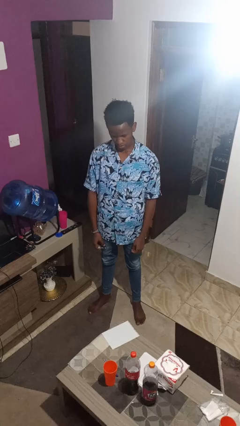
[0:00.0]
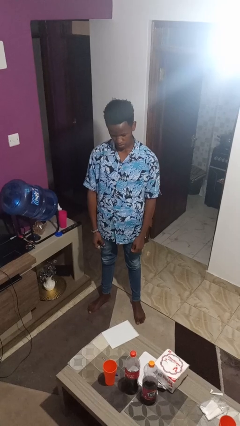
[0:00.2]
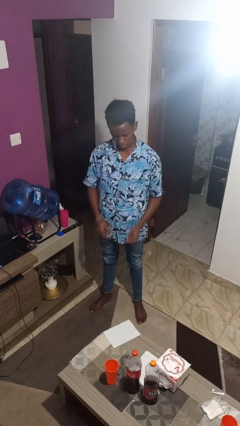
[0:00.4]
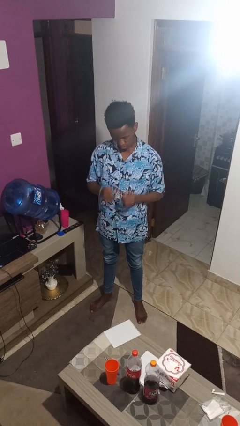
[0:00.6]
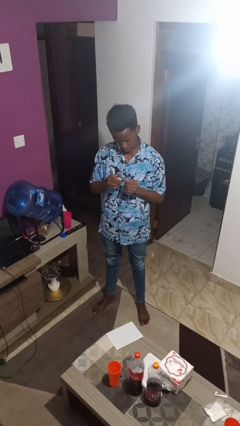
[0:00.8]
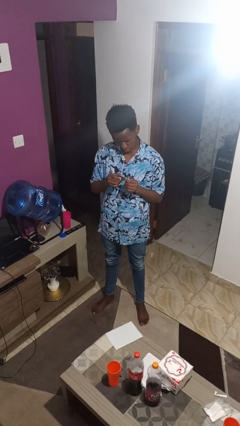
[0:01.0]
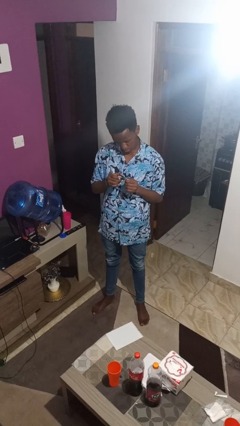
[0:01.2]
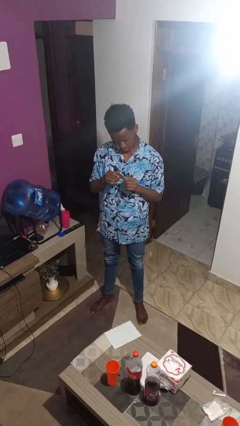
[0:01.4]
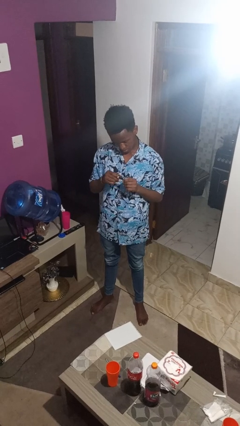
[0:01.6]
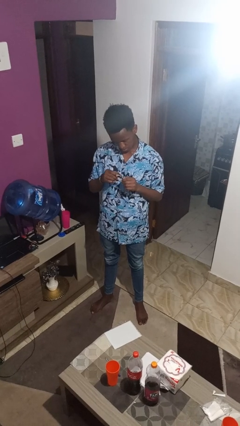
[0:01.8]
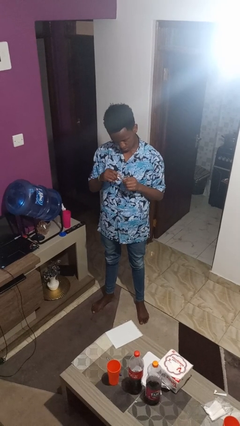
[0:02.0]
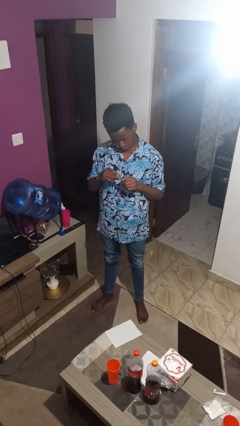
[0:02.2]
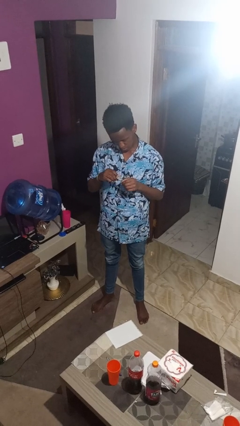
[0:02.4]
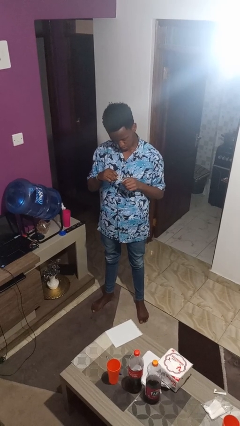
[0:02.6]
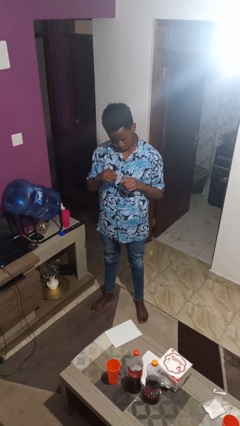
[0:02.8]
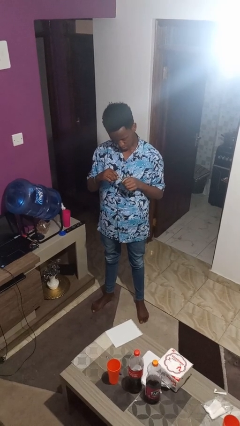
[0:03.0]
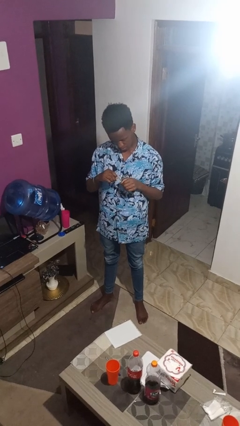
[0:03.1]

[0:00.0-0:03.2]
person clips fingernails

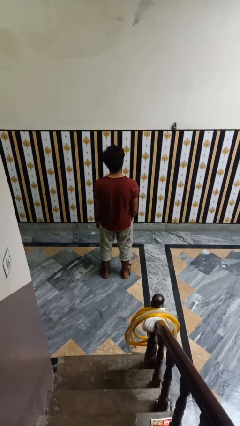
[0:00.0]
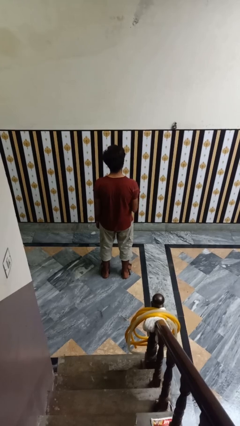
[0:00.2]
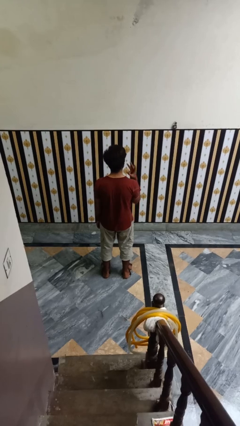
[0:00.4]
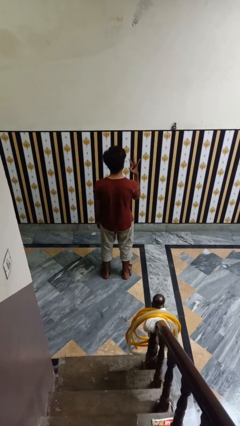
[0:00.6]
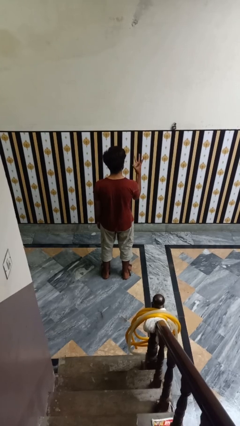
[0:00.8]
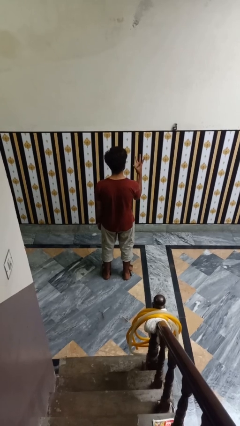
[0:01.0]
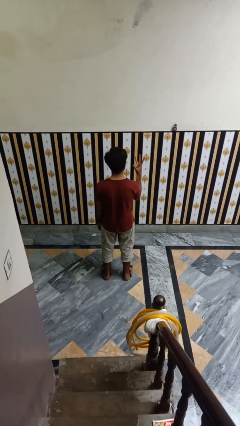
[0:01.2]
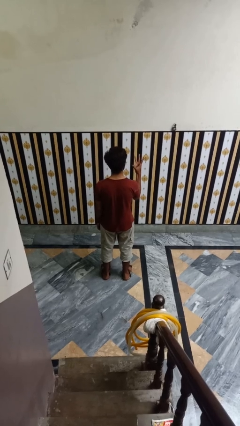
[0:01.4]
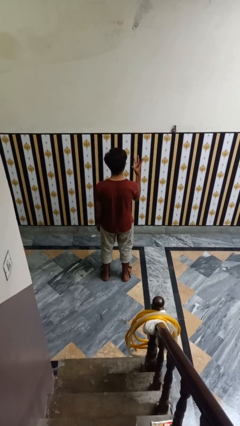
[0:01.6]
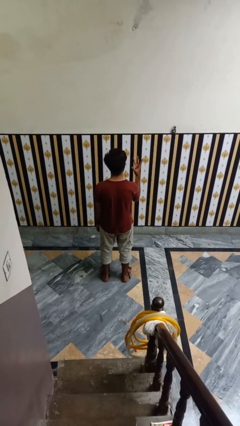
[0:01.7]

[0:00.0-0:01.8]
person gestures number three

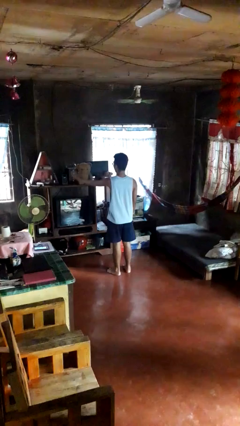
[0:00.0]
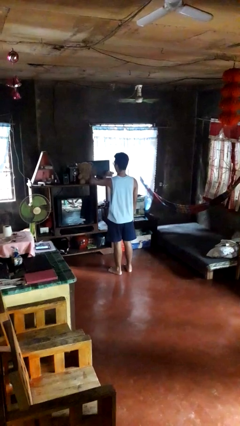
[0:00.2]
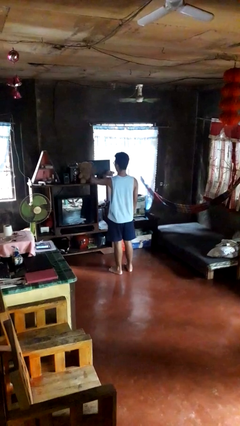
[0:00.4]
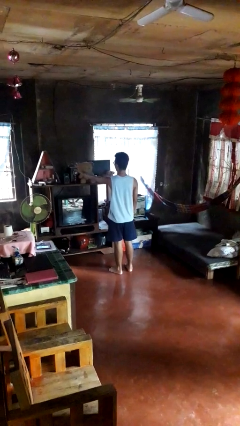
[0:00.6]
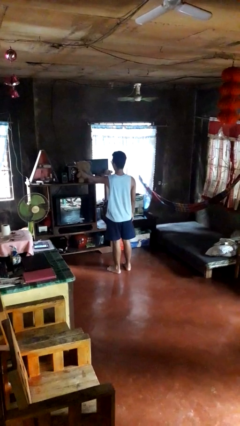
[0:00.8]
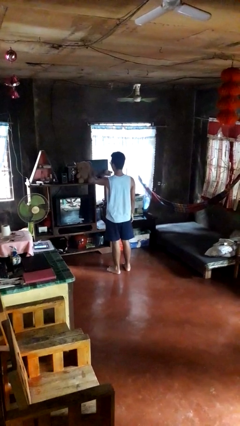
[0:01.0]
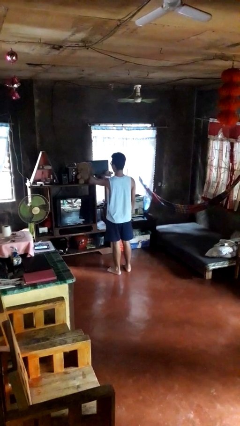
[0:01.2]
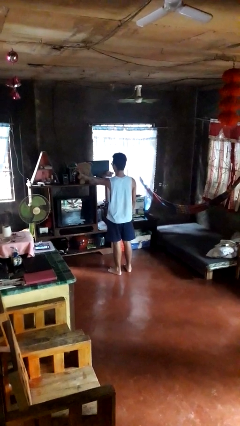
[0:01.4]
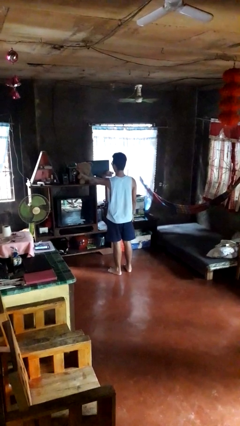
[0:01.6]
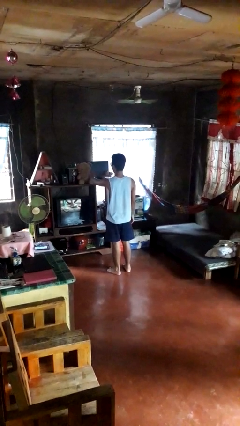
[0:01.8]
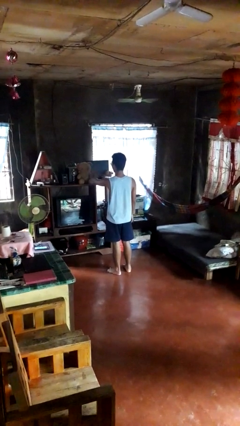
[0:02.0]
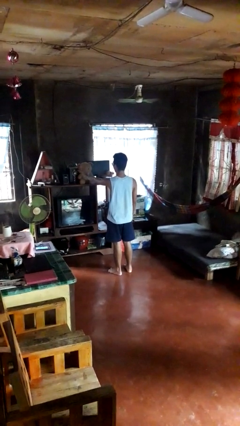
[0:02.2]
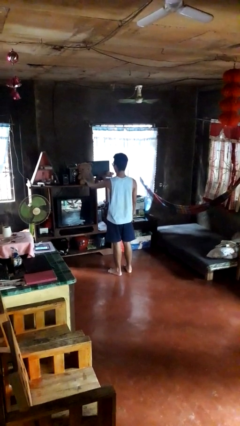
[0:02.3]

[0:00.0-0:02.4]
person waves hand over object

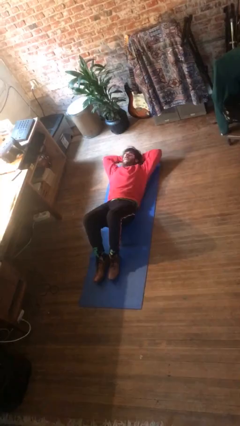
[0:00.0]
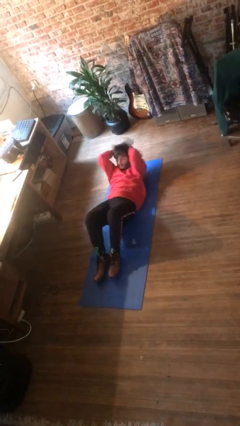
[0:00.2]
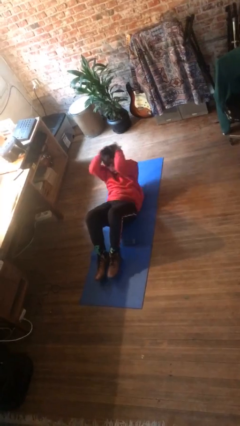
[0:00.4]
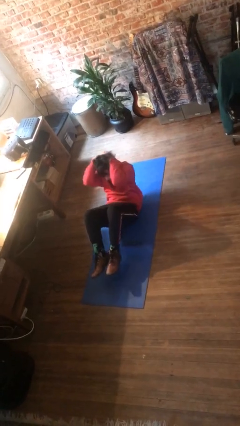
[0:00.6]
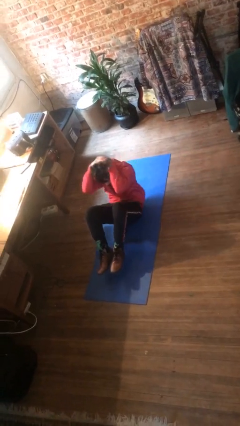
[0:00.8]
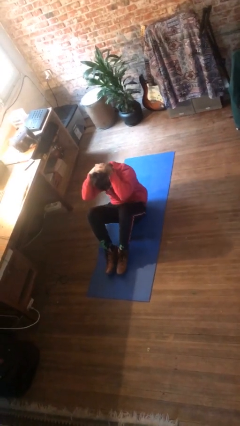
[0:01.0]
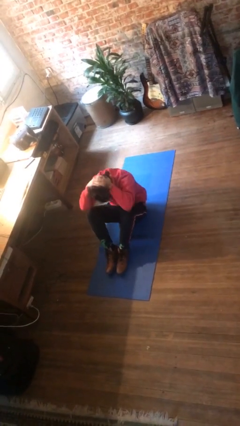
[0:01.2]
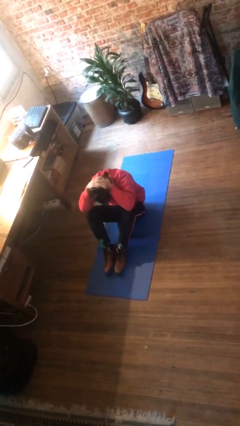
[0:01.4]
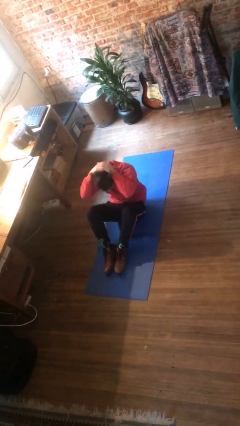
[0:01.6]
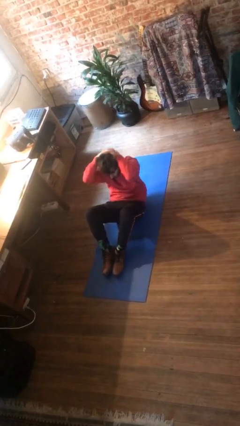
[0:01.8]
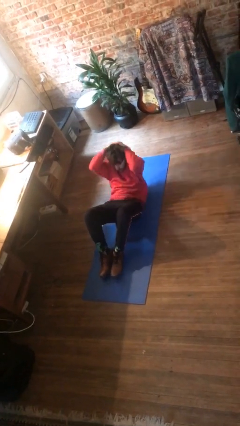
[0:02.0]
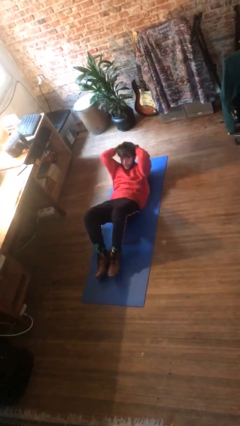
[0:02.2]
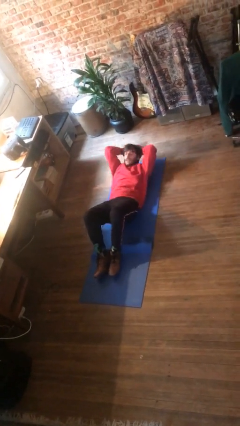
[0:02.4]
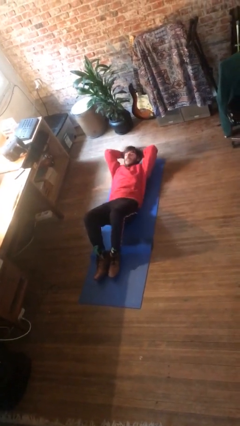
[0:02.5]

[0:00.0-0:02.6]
person exercises with situp

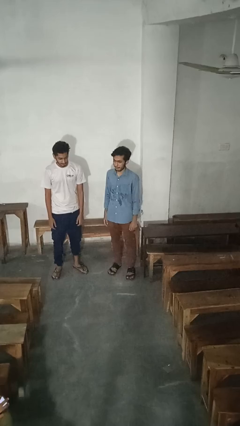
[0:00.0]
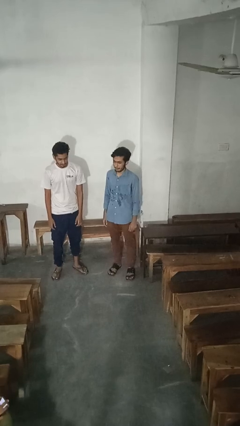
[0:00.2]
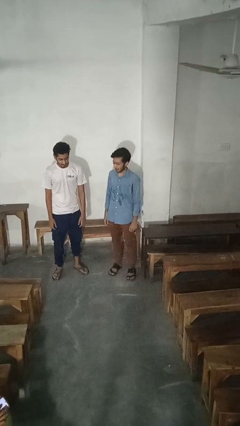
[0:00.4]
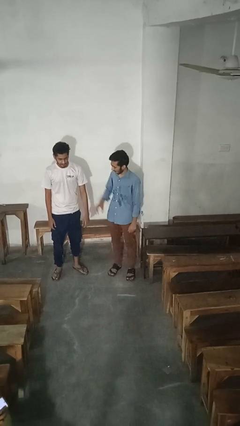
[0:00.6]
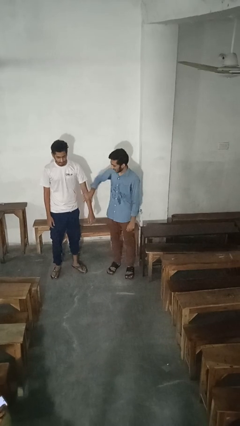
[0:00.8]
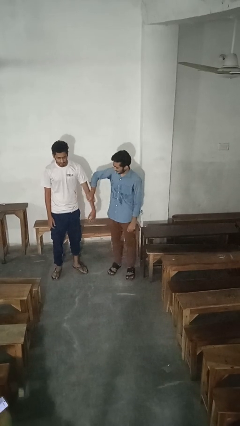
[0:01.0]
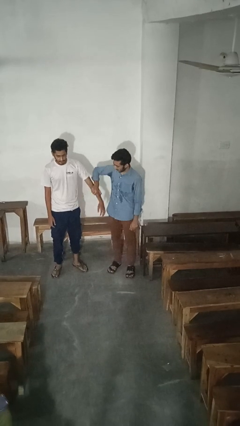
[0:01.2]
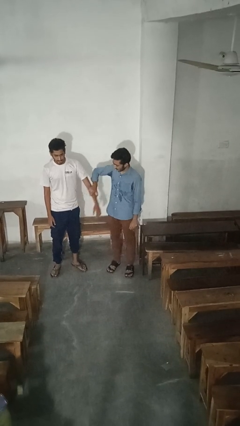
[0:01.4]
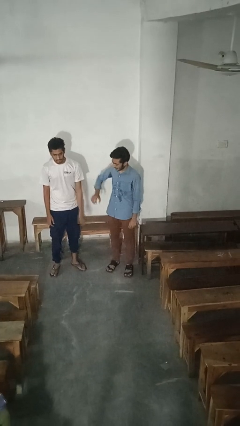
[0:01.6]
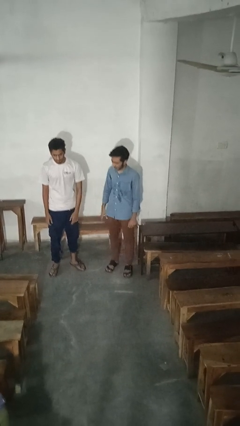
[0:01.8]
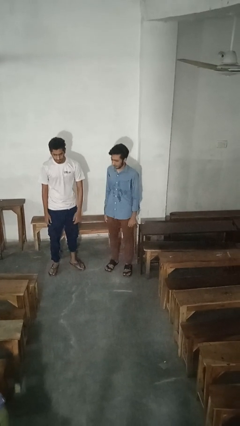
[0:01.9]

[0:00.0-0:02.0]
person grabs person by forearm

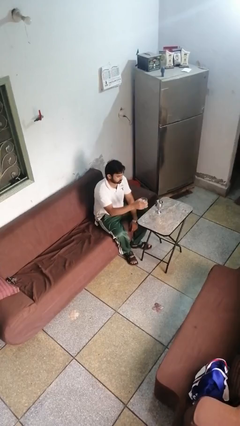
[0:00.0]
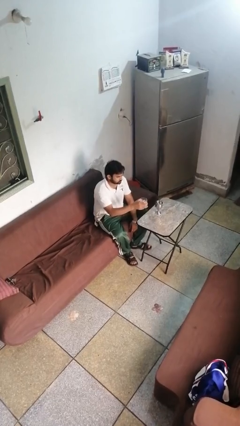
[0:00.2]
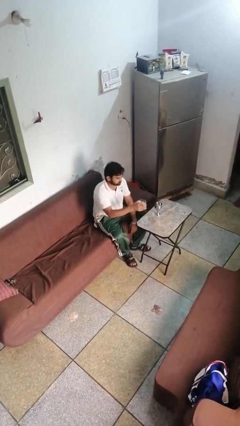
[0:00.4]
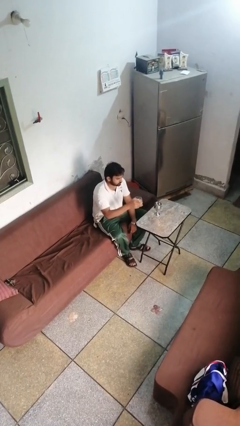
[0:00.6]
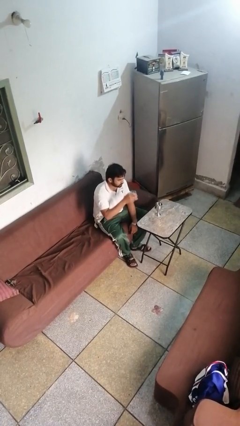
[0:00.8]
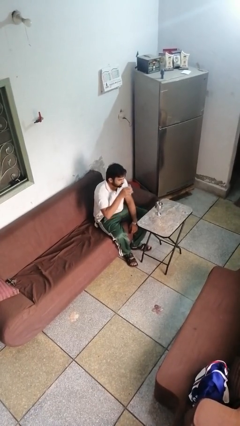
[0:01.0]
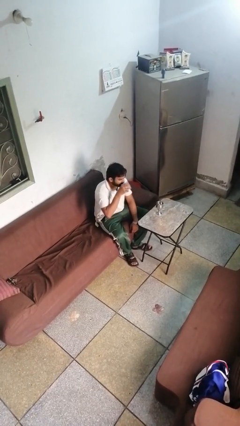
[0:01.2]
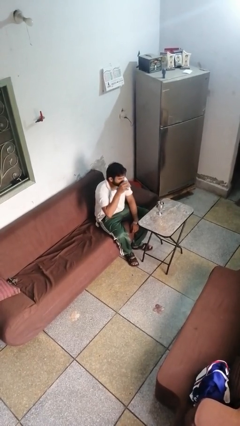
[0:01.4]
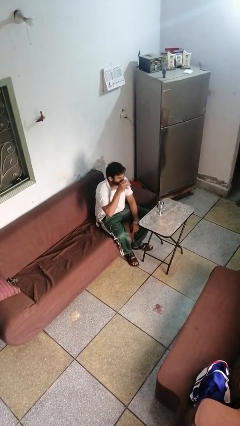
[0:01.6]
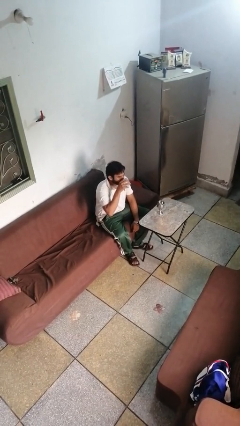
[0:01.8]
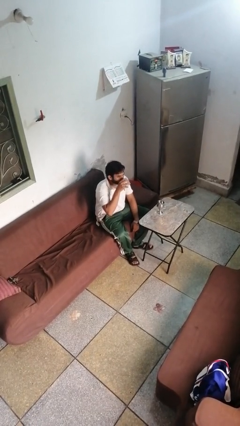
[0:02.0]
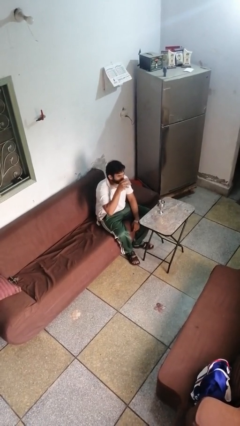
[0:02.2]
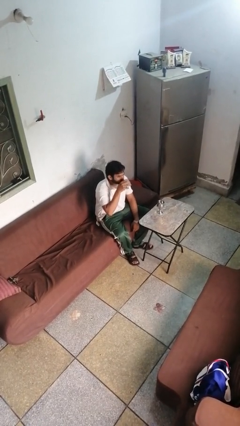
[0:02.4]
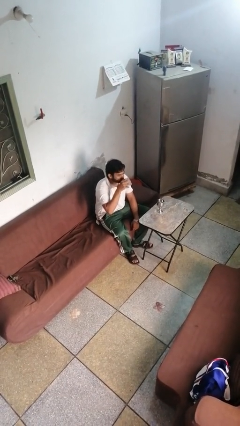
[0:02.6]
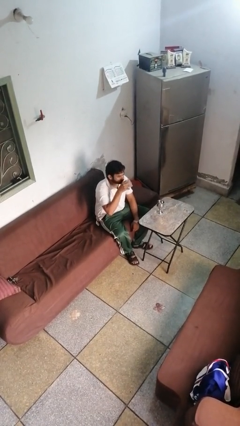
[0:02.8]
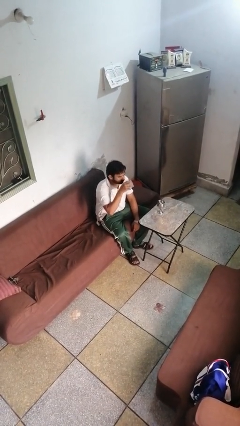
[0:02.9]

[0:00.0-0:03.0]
person drinks from shotglass

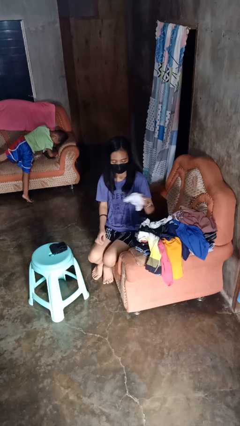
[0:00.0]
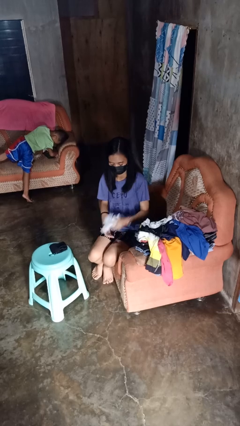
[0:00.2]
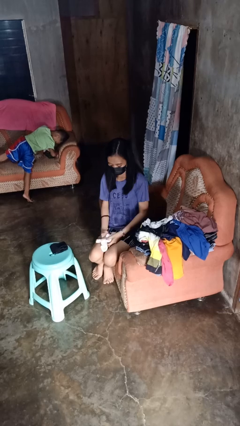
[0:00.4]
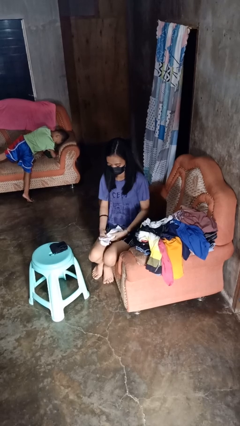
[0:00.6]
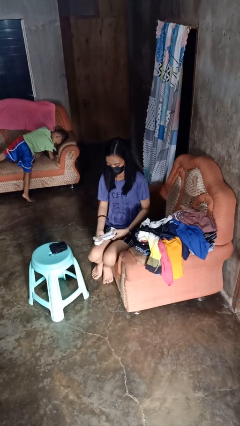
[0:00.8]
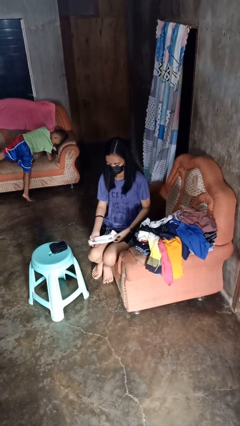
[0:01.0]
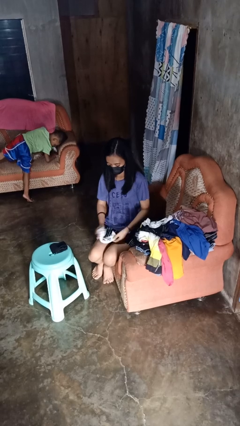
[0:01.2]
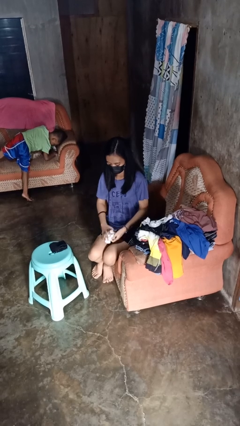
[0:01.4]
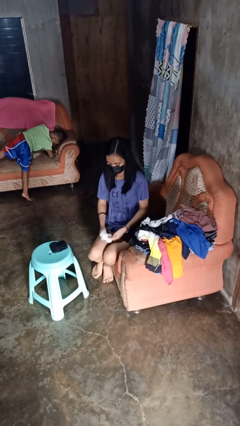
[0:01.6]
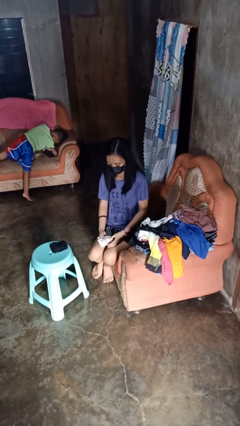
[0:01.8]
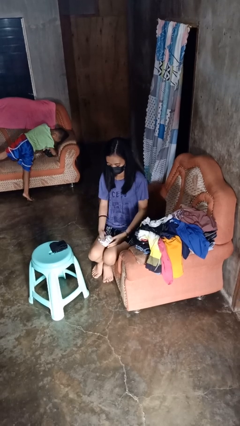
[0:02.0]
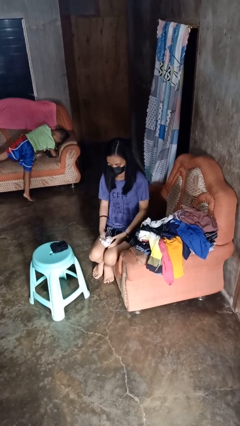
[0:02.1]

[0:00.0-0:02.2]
person folds socks
